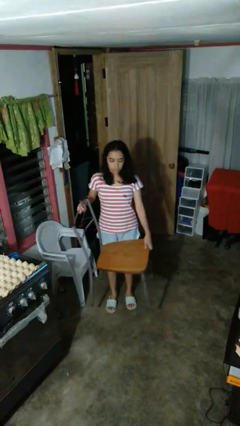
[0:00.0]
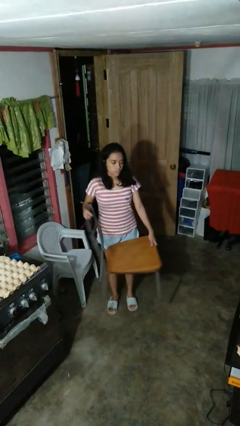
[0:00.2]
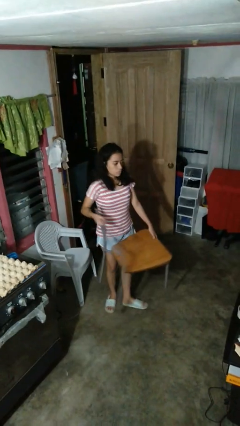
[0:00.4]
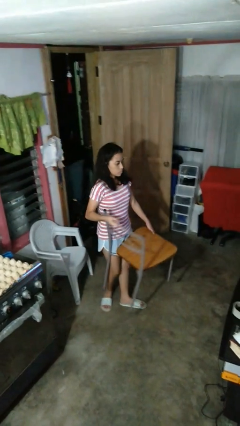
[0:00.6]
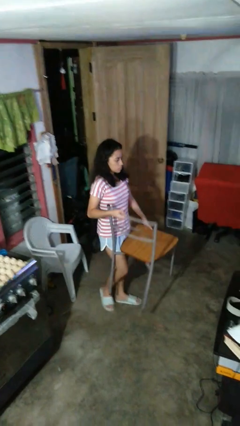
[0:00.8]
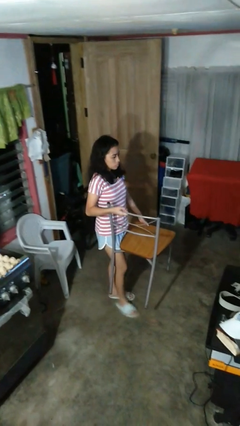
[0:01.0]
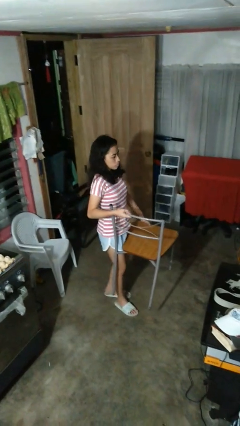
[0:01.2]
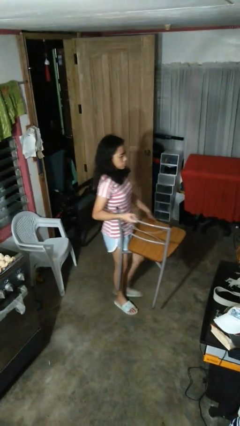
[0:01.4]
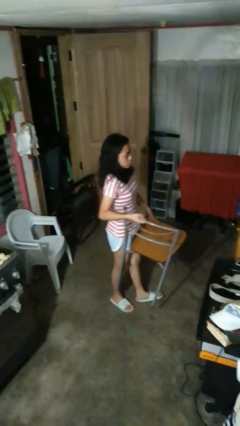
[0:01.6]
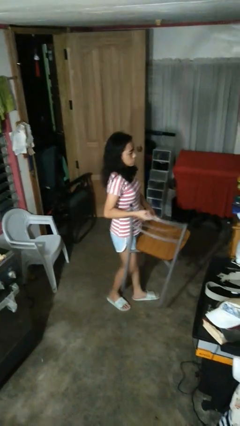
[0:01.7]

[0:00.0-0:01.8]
person carries furniture

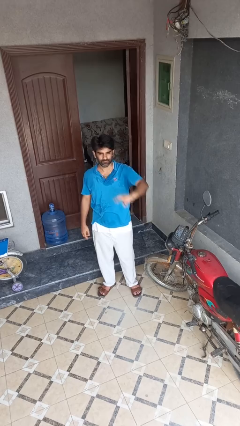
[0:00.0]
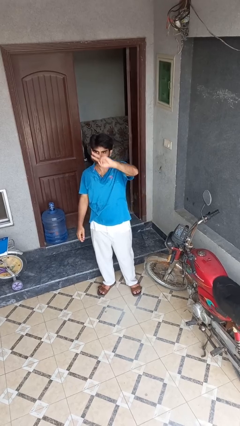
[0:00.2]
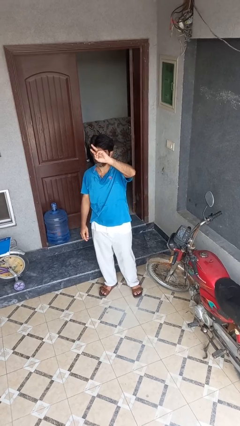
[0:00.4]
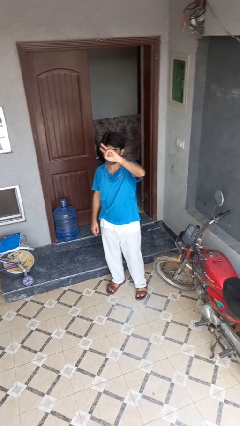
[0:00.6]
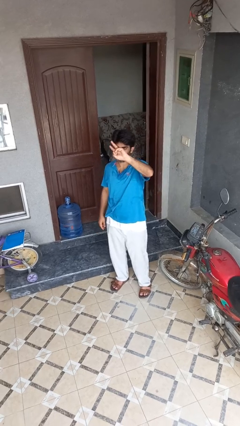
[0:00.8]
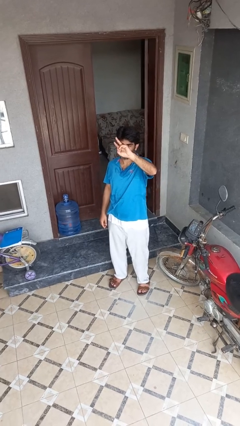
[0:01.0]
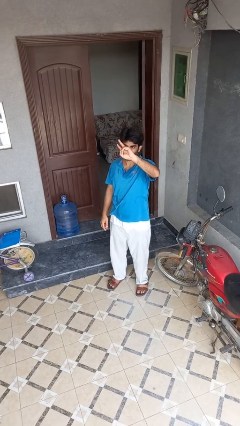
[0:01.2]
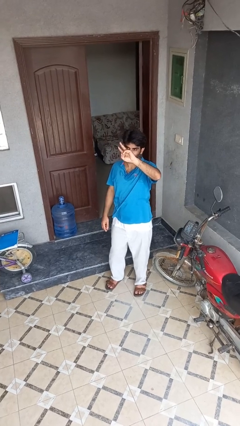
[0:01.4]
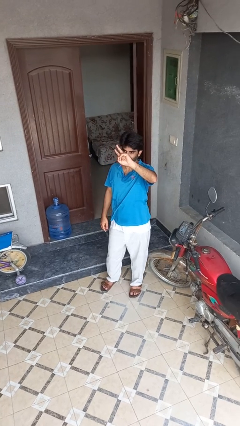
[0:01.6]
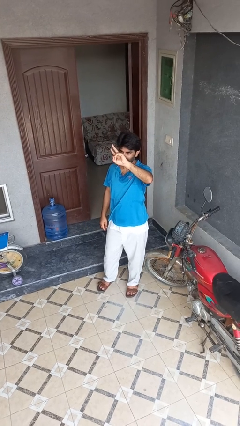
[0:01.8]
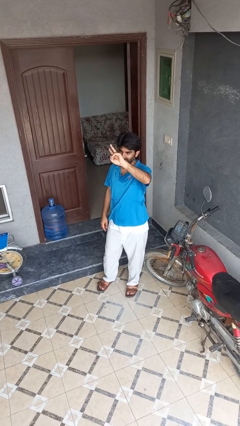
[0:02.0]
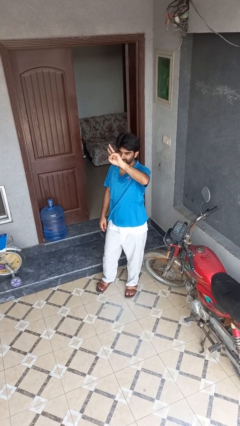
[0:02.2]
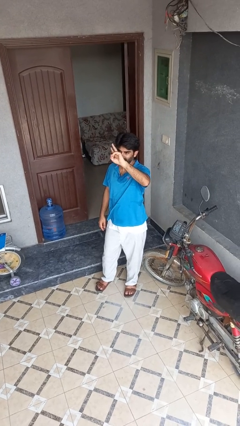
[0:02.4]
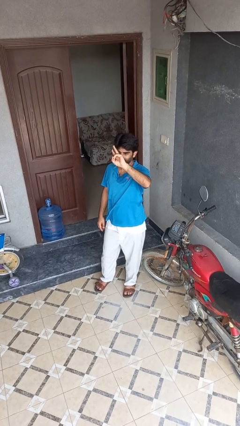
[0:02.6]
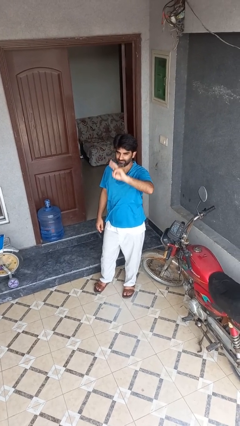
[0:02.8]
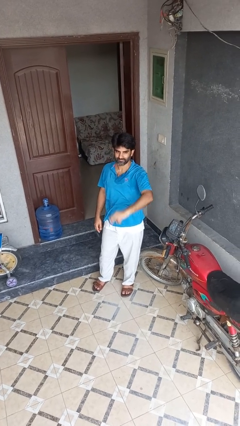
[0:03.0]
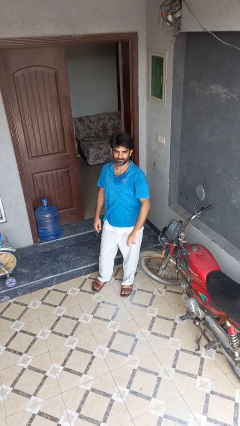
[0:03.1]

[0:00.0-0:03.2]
person gestures peace

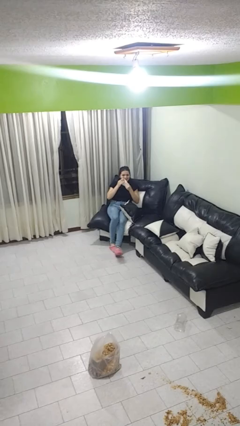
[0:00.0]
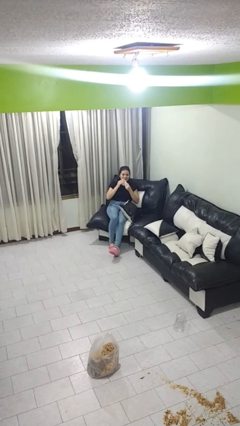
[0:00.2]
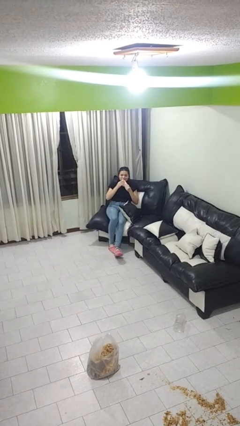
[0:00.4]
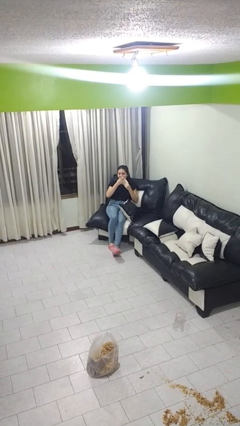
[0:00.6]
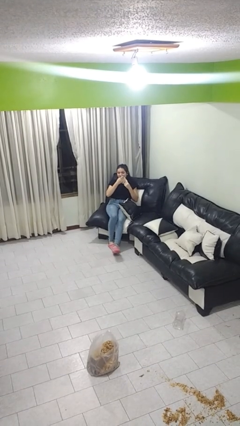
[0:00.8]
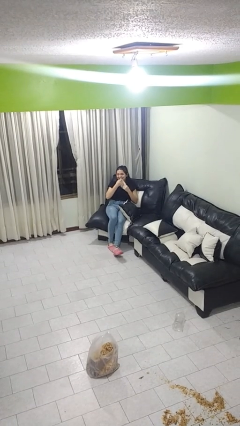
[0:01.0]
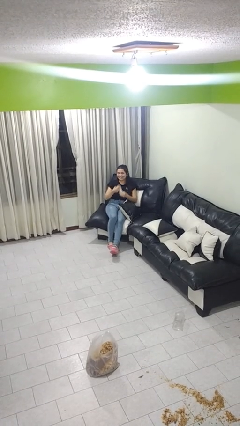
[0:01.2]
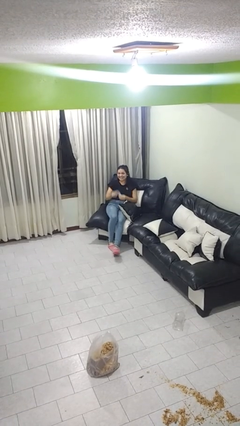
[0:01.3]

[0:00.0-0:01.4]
person wipes mouth with napkin

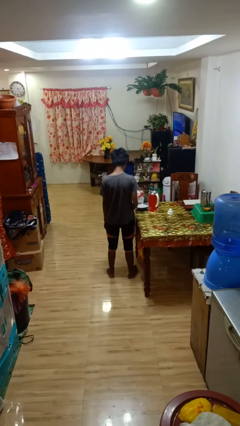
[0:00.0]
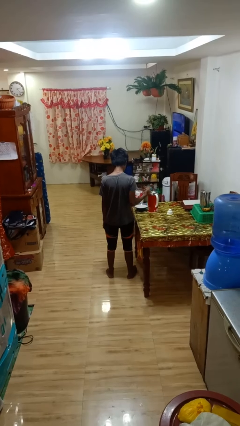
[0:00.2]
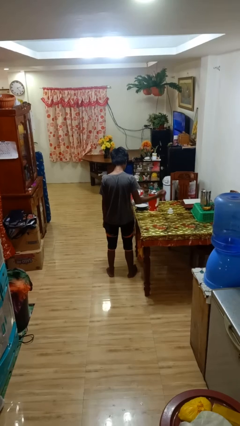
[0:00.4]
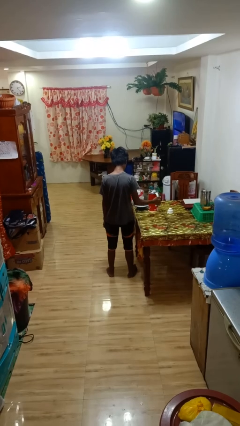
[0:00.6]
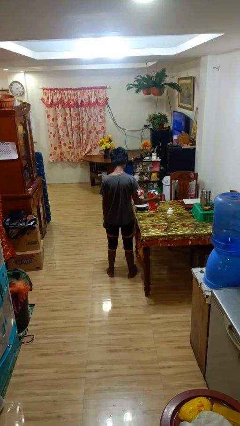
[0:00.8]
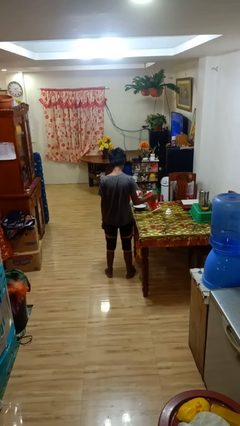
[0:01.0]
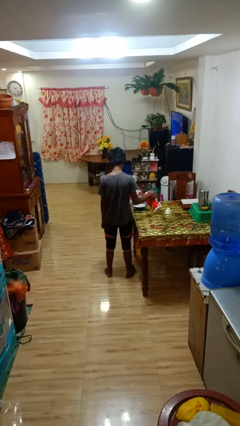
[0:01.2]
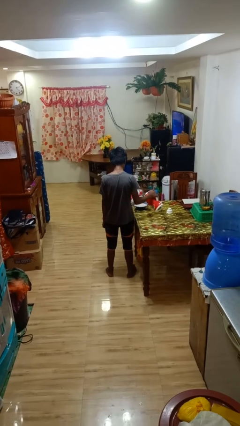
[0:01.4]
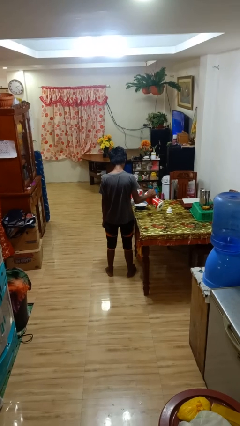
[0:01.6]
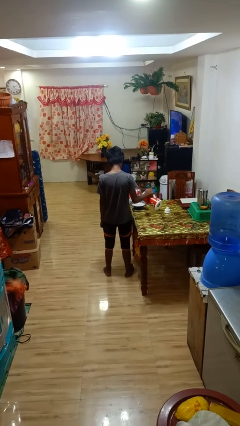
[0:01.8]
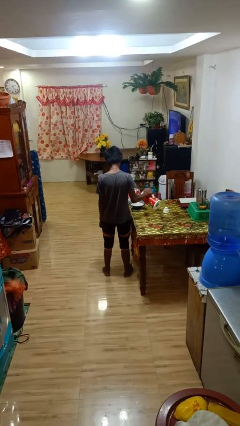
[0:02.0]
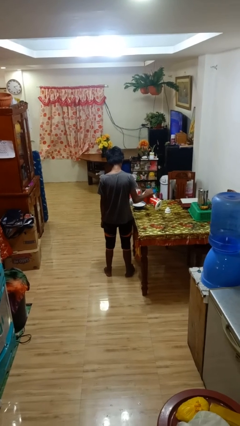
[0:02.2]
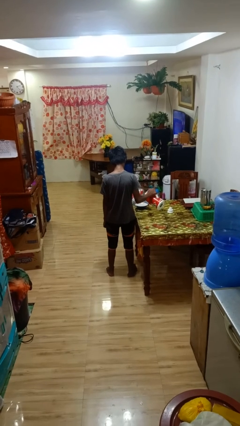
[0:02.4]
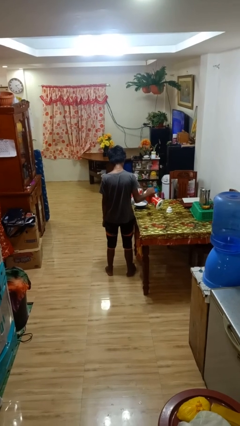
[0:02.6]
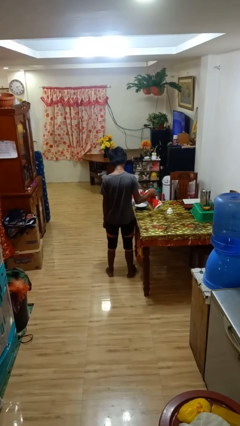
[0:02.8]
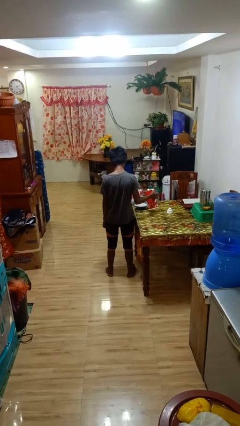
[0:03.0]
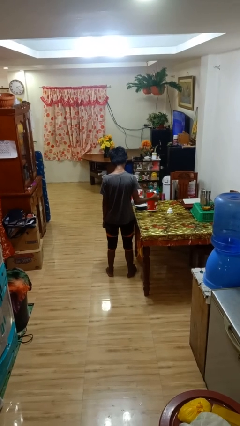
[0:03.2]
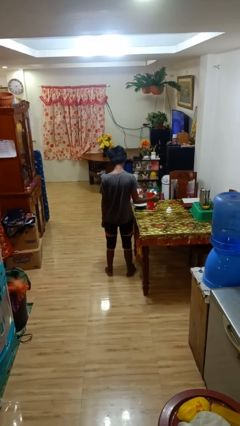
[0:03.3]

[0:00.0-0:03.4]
person pours into bowl

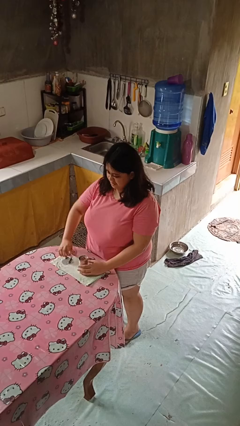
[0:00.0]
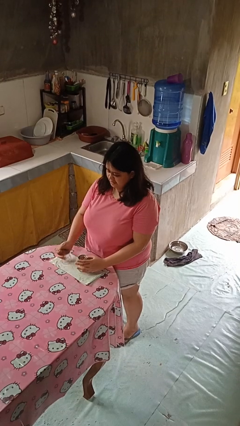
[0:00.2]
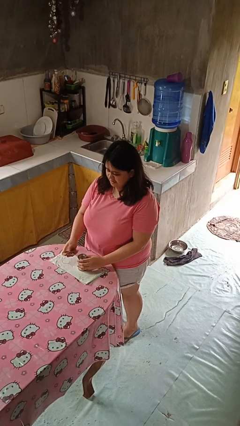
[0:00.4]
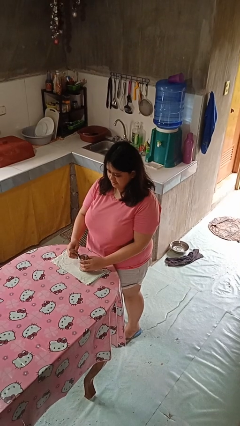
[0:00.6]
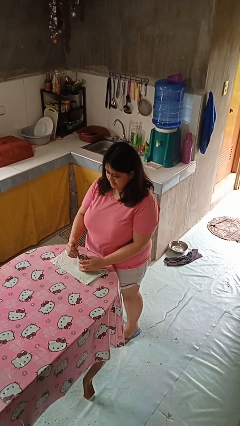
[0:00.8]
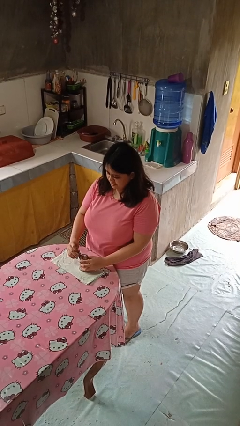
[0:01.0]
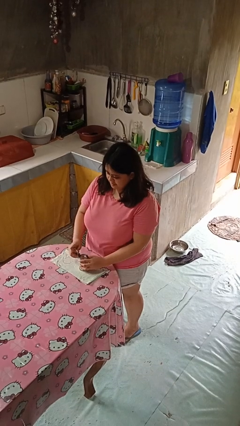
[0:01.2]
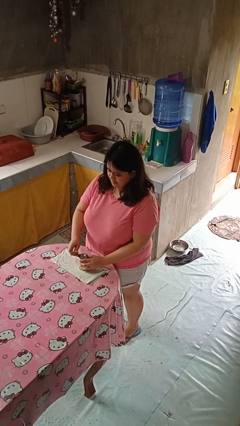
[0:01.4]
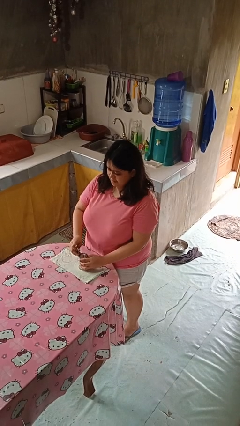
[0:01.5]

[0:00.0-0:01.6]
person opens can with can opener

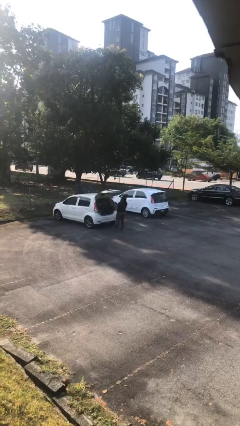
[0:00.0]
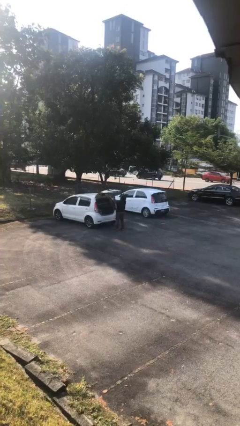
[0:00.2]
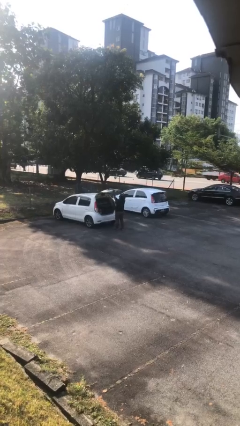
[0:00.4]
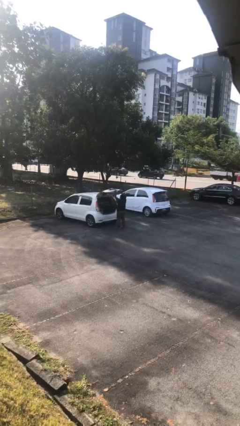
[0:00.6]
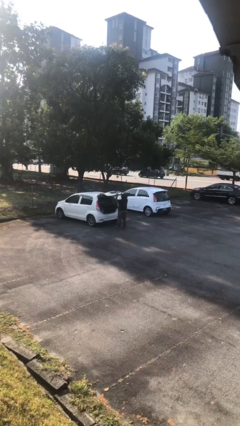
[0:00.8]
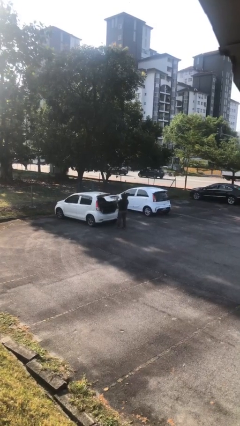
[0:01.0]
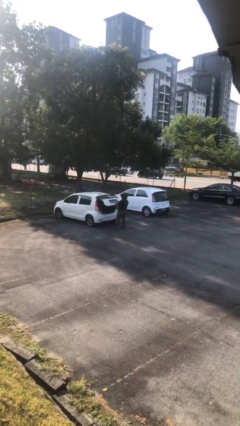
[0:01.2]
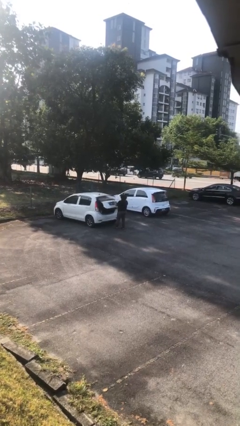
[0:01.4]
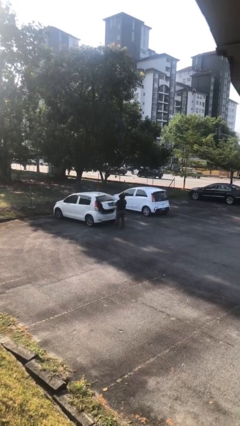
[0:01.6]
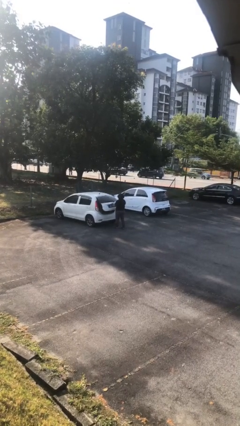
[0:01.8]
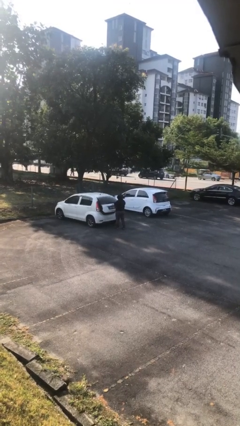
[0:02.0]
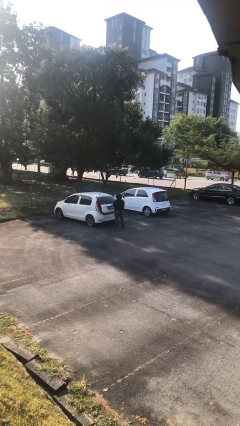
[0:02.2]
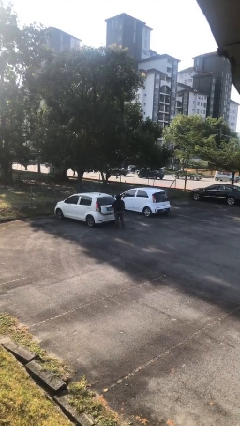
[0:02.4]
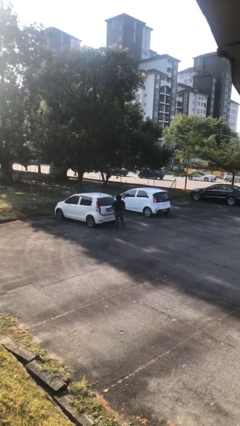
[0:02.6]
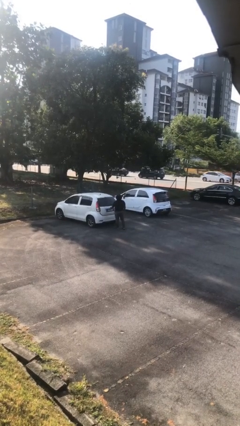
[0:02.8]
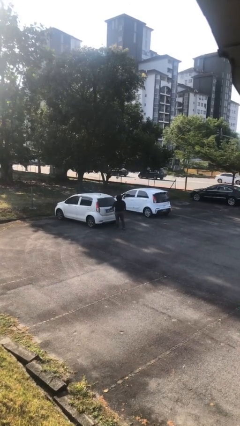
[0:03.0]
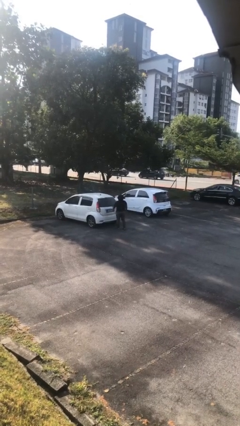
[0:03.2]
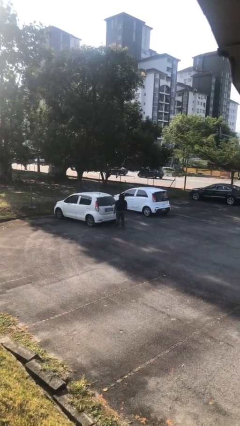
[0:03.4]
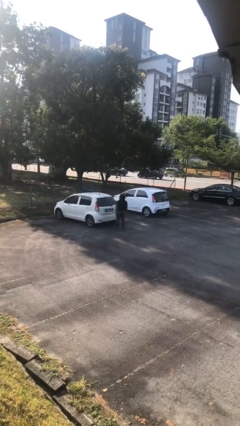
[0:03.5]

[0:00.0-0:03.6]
person closes car trunk

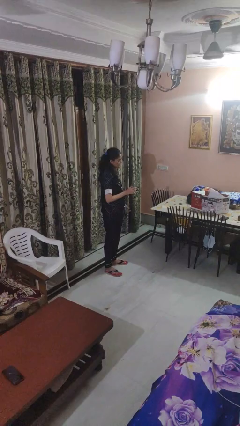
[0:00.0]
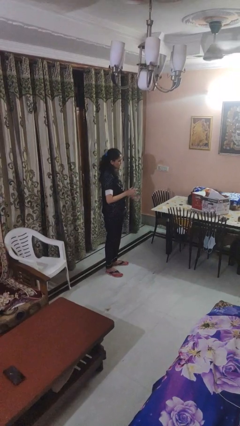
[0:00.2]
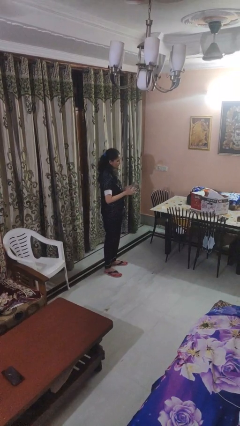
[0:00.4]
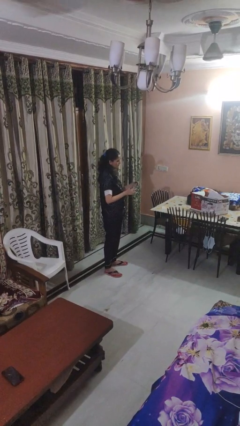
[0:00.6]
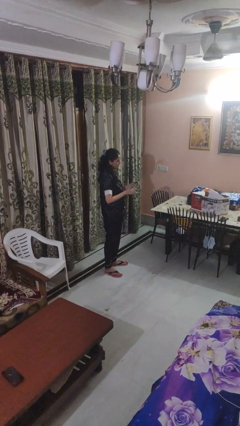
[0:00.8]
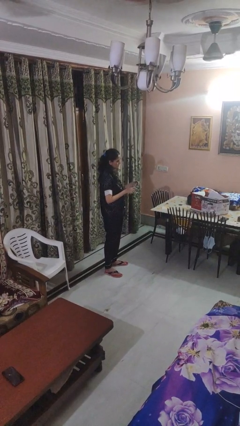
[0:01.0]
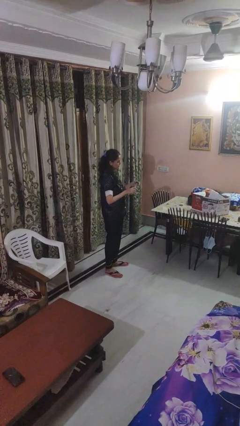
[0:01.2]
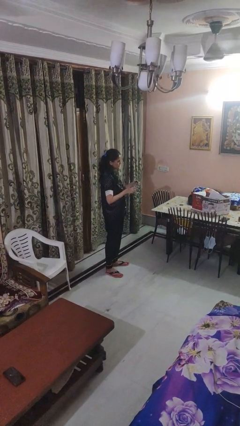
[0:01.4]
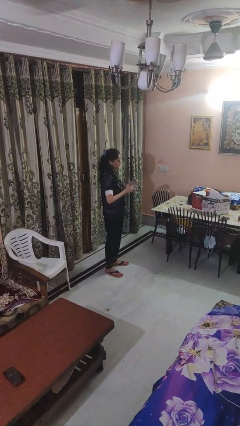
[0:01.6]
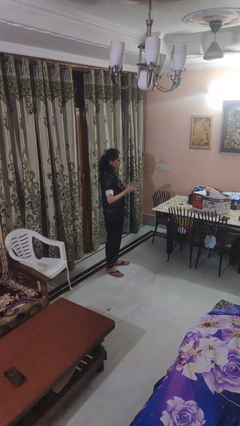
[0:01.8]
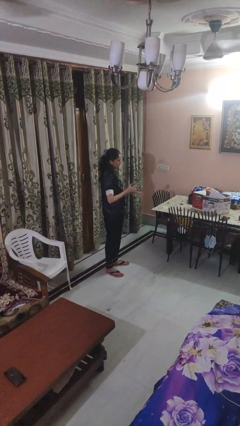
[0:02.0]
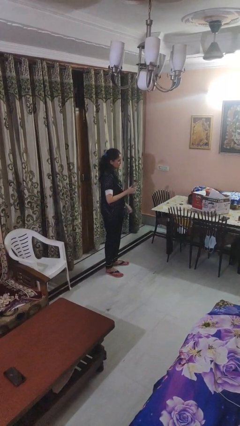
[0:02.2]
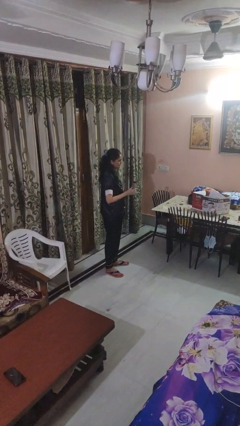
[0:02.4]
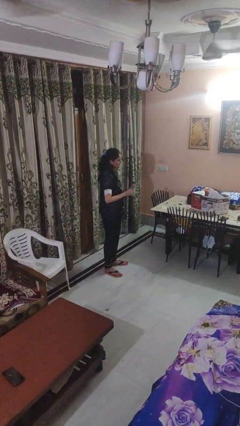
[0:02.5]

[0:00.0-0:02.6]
person screws lid to bottle
